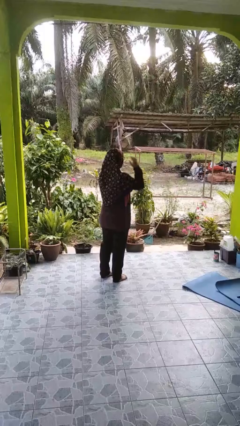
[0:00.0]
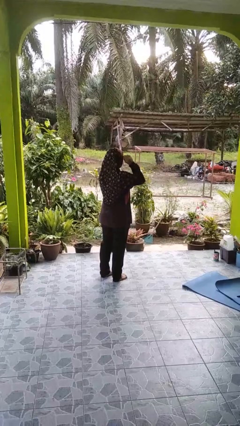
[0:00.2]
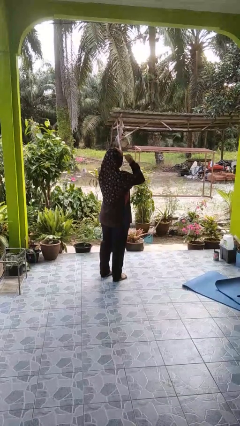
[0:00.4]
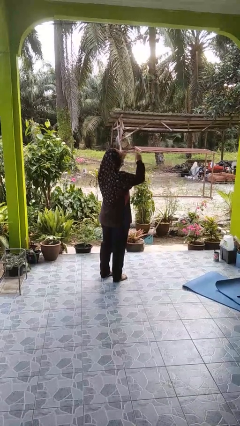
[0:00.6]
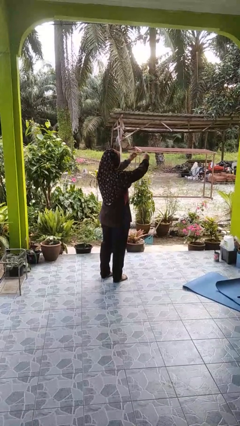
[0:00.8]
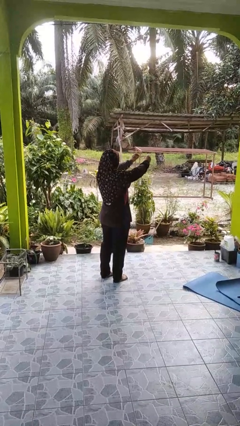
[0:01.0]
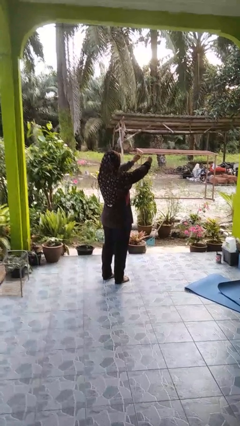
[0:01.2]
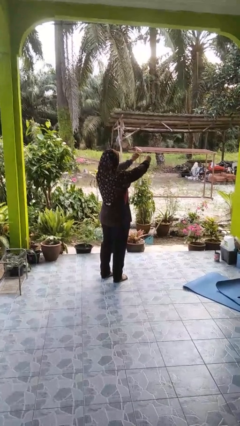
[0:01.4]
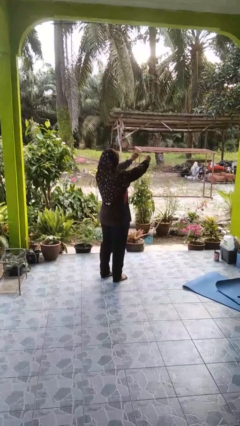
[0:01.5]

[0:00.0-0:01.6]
person takes off glasses

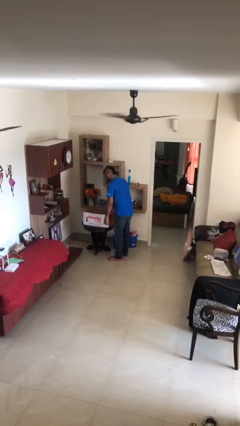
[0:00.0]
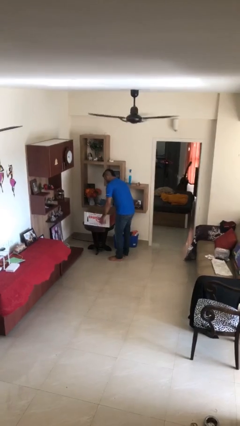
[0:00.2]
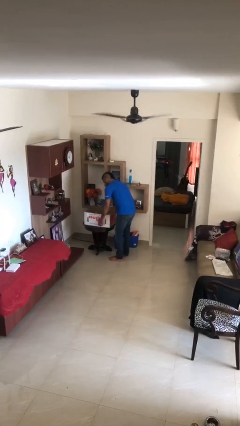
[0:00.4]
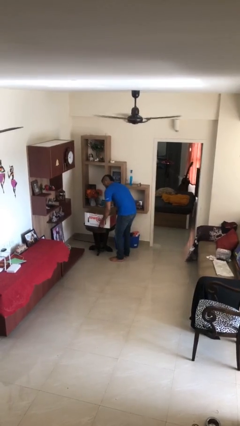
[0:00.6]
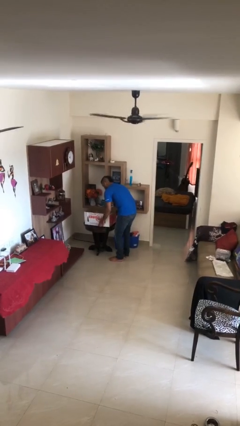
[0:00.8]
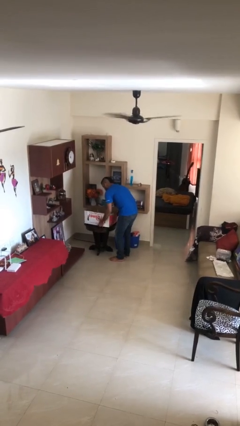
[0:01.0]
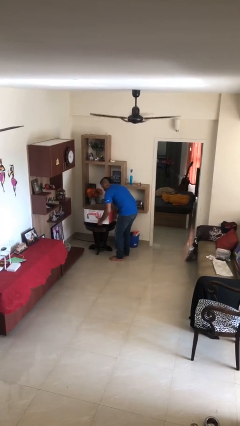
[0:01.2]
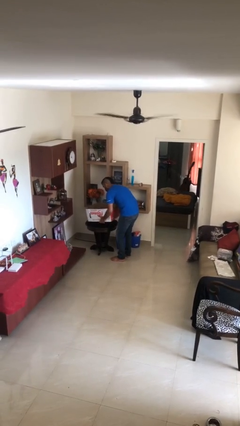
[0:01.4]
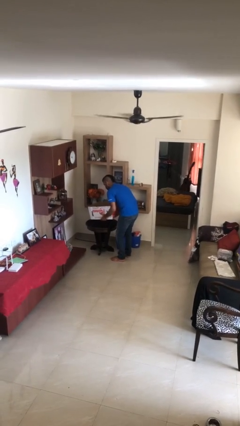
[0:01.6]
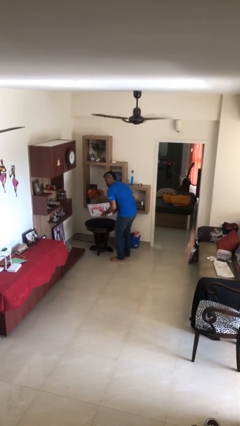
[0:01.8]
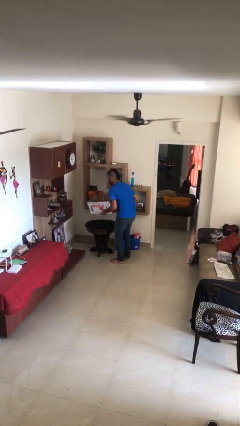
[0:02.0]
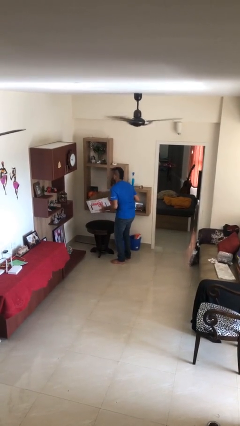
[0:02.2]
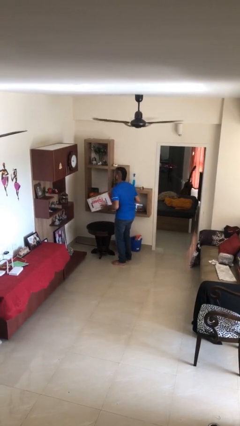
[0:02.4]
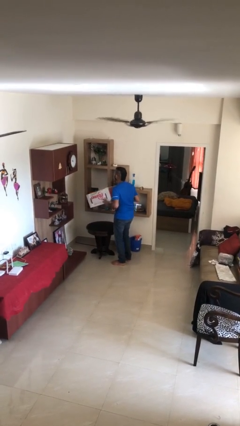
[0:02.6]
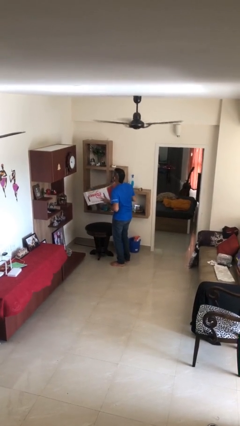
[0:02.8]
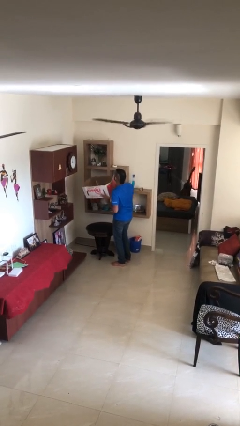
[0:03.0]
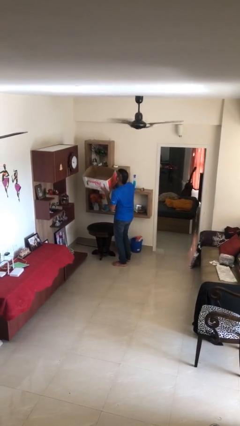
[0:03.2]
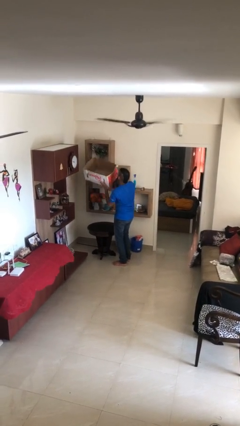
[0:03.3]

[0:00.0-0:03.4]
person picks up object from table

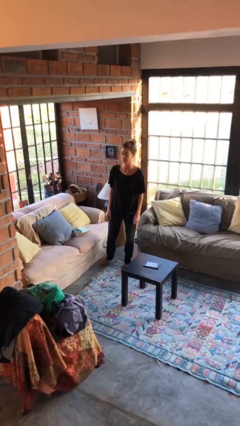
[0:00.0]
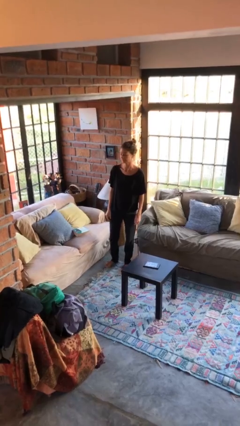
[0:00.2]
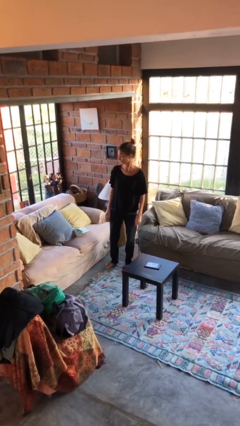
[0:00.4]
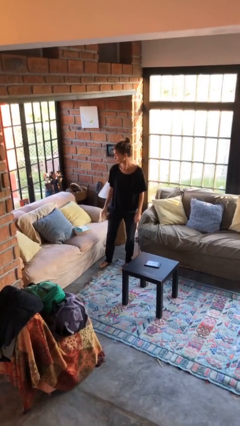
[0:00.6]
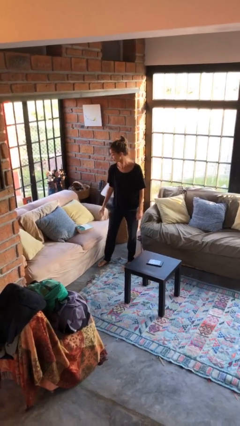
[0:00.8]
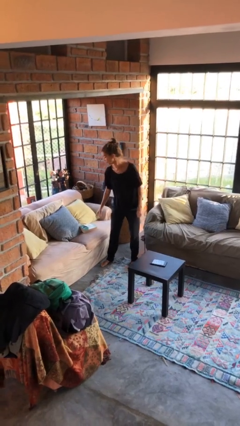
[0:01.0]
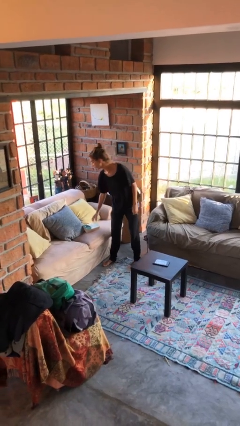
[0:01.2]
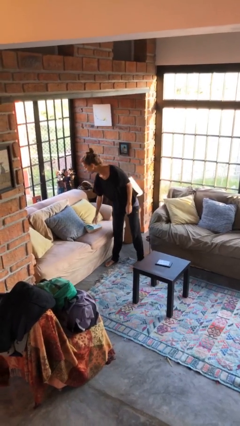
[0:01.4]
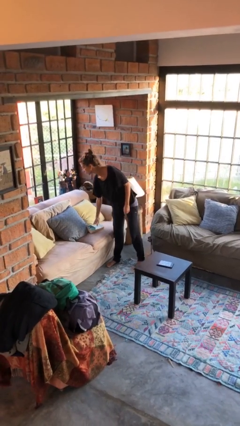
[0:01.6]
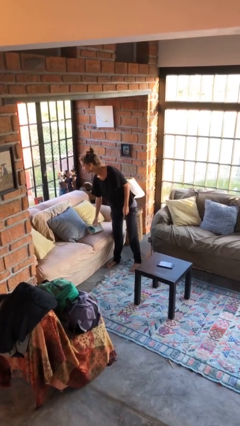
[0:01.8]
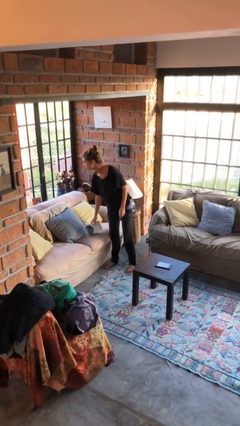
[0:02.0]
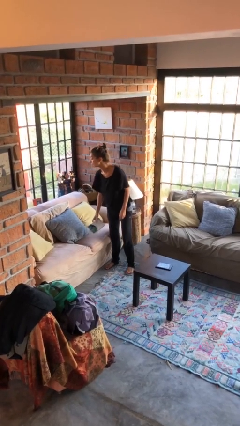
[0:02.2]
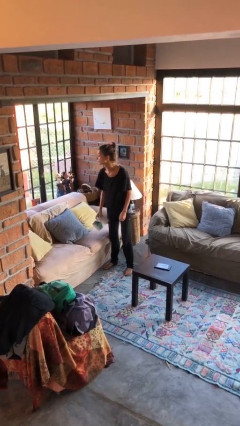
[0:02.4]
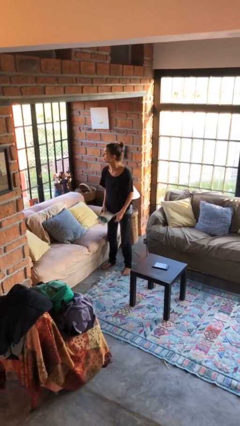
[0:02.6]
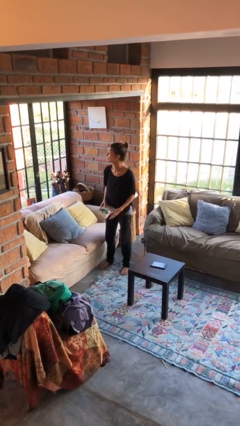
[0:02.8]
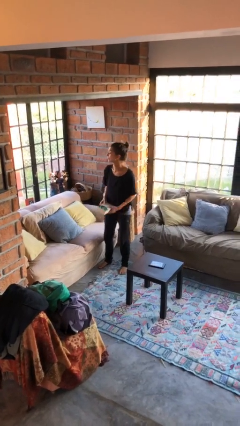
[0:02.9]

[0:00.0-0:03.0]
person picks up object from couch

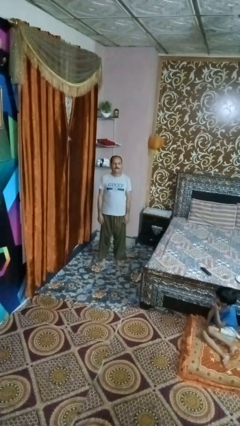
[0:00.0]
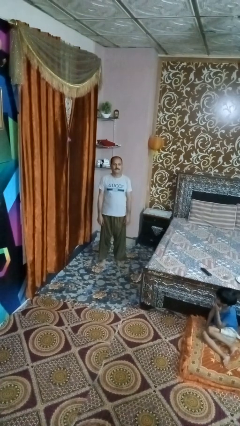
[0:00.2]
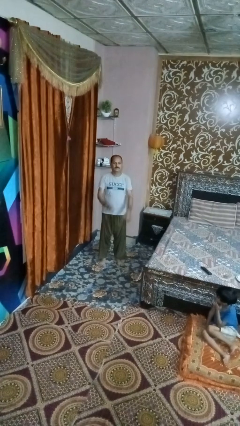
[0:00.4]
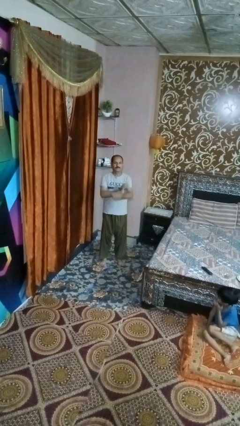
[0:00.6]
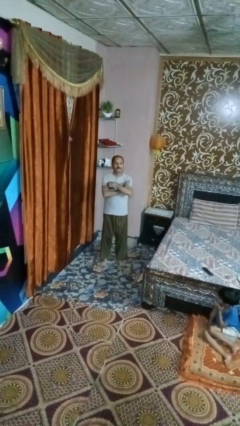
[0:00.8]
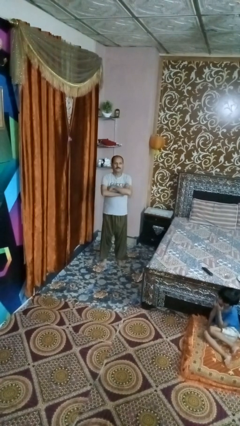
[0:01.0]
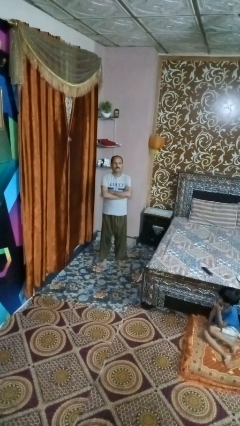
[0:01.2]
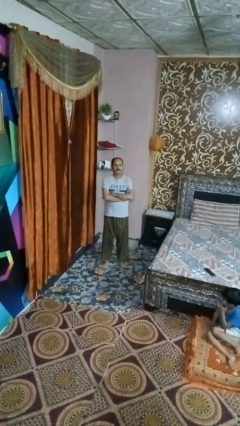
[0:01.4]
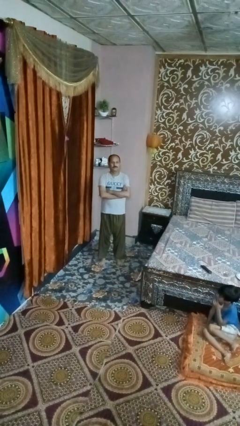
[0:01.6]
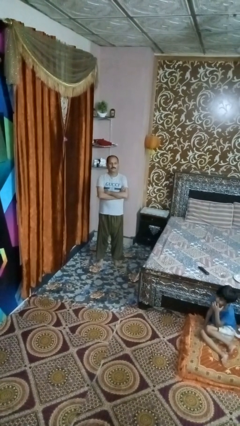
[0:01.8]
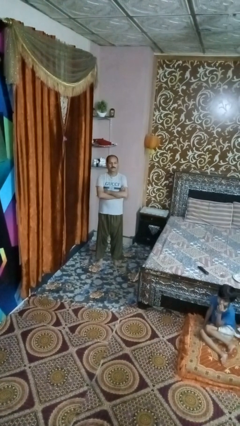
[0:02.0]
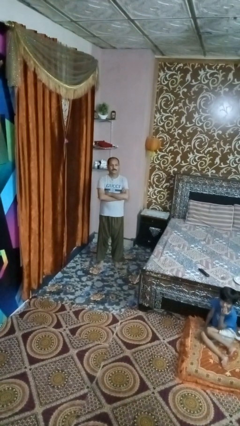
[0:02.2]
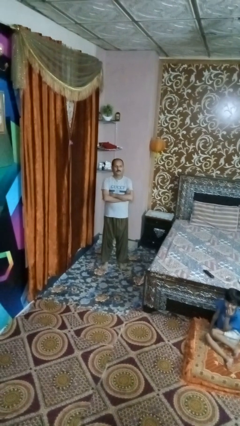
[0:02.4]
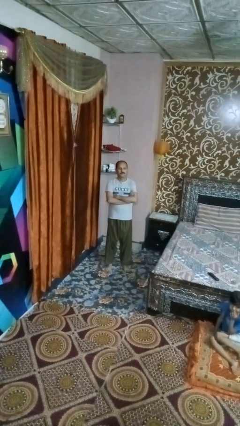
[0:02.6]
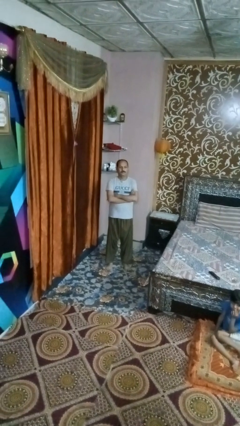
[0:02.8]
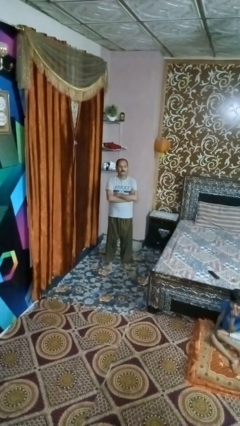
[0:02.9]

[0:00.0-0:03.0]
person crosses arms

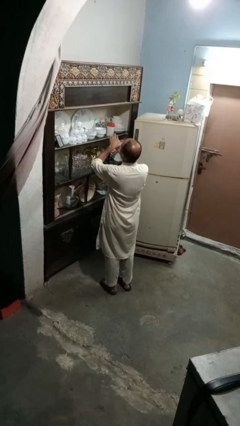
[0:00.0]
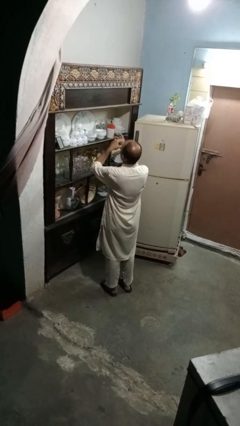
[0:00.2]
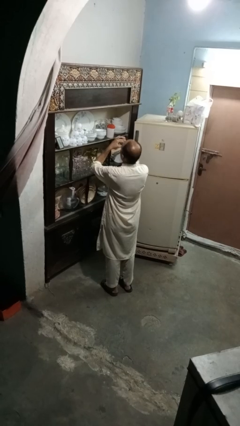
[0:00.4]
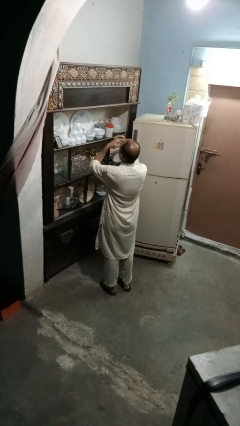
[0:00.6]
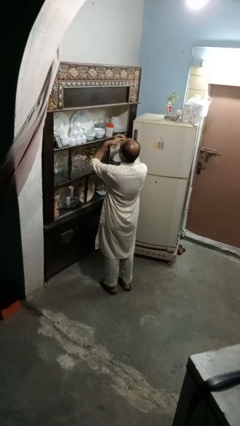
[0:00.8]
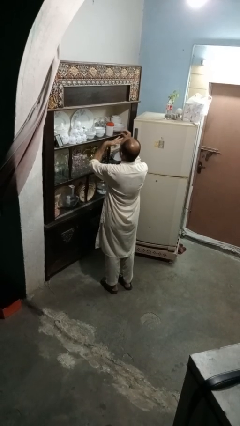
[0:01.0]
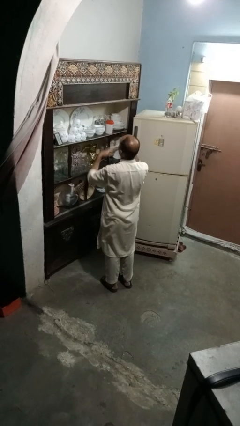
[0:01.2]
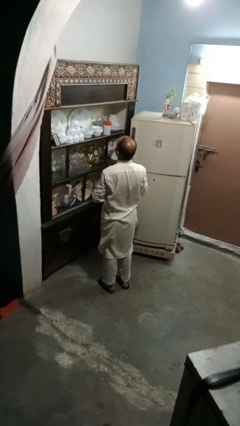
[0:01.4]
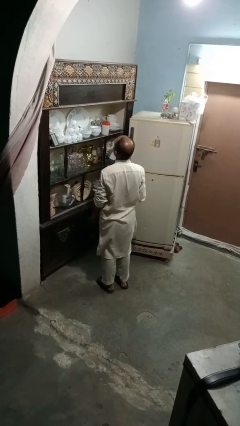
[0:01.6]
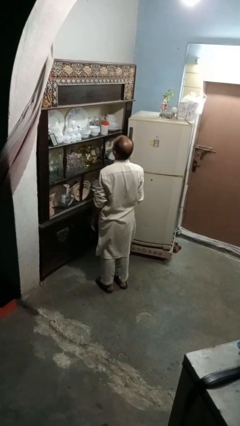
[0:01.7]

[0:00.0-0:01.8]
person takes off ring

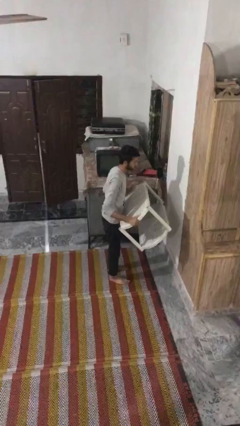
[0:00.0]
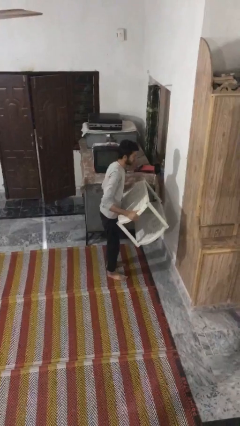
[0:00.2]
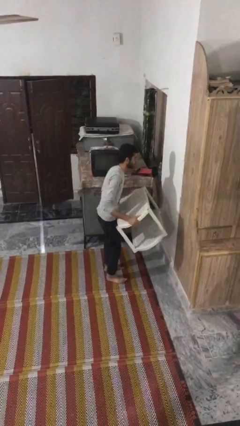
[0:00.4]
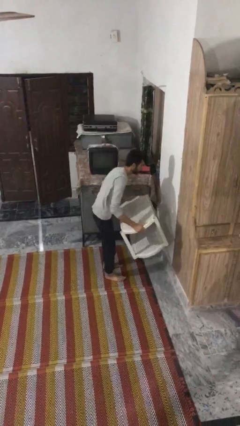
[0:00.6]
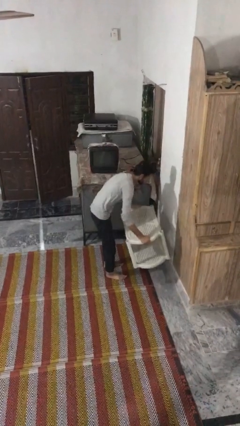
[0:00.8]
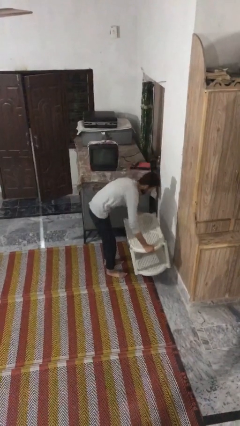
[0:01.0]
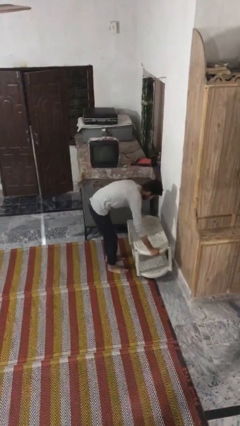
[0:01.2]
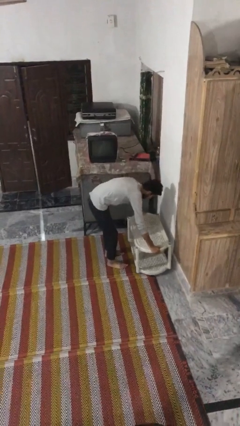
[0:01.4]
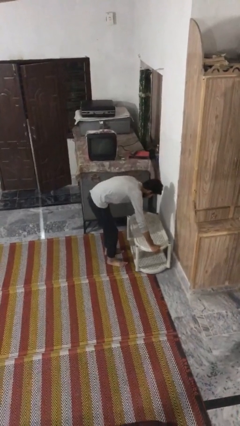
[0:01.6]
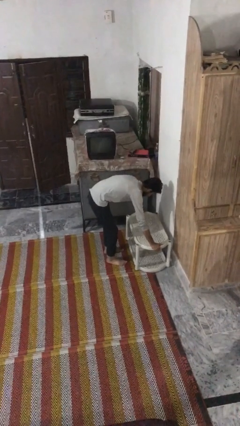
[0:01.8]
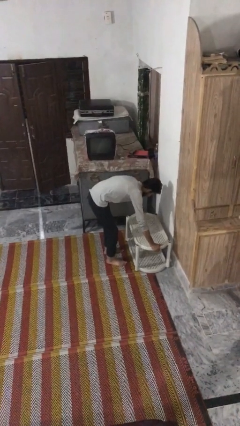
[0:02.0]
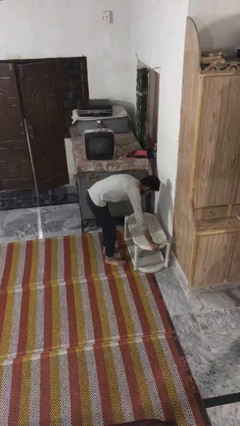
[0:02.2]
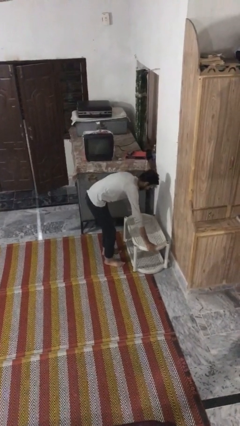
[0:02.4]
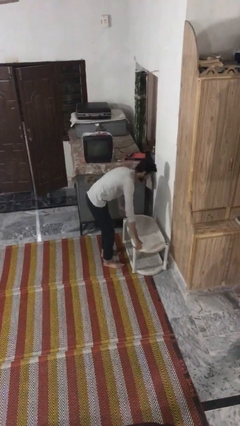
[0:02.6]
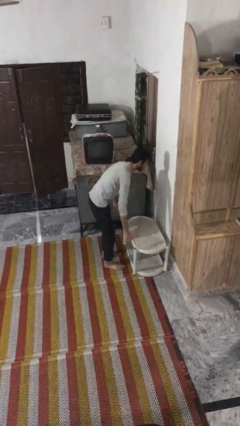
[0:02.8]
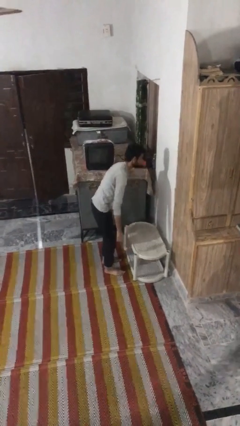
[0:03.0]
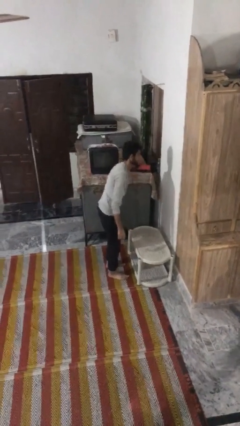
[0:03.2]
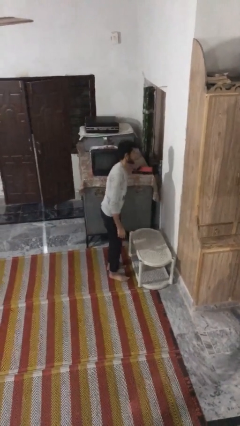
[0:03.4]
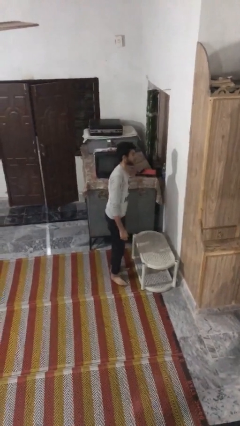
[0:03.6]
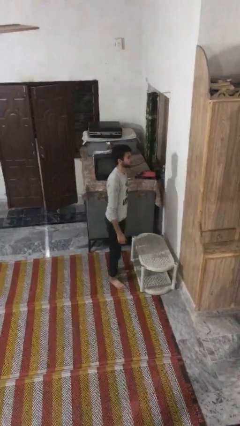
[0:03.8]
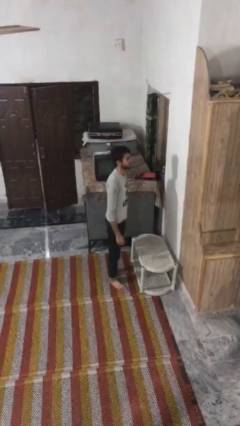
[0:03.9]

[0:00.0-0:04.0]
person puts down object on floor

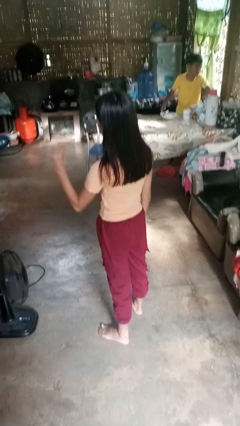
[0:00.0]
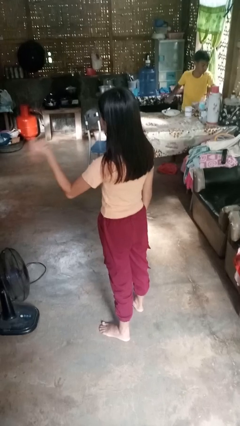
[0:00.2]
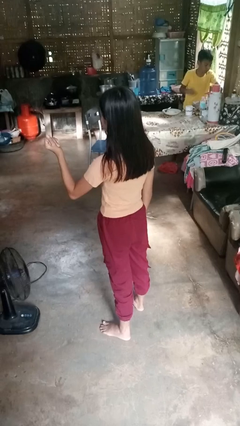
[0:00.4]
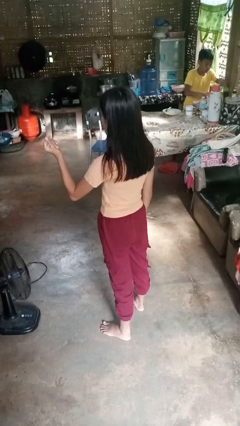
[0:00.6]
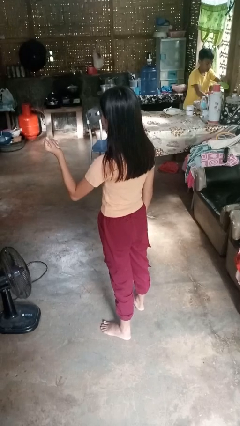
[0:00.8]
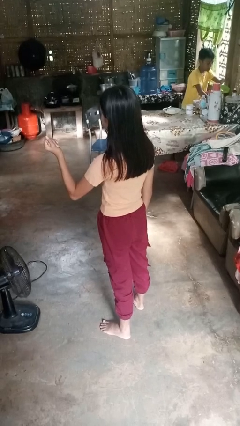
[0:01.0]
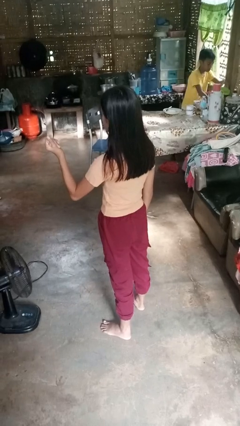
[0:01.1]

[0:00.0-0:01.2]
person snaps fingers
